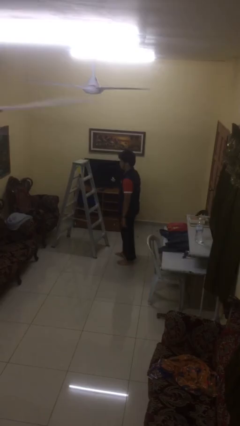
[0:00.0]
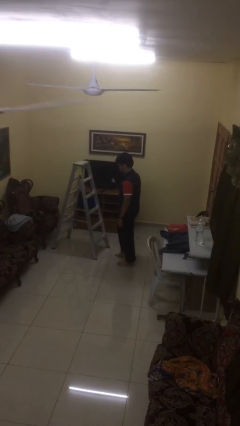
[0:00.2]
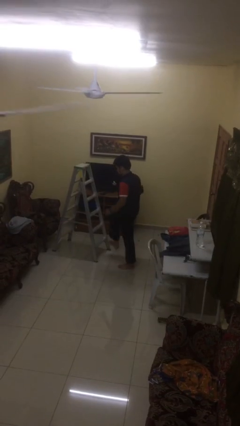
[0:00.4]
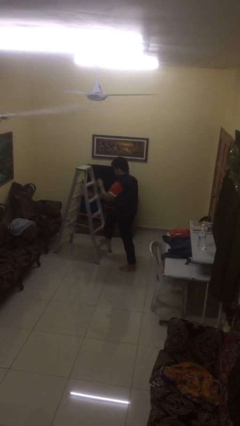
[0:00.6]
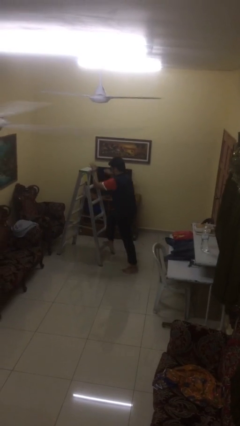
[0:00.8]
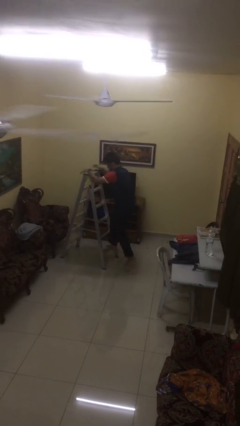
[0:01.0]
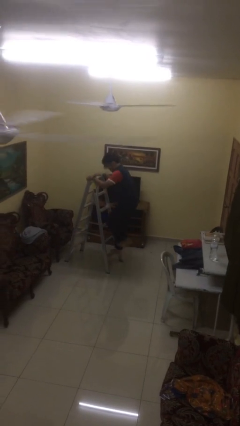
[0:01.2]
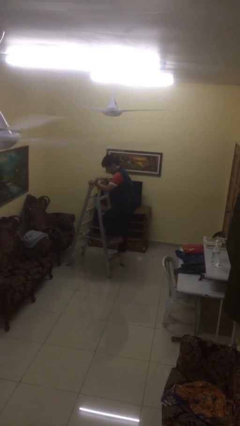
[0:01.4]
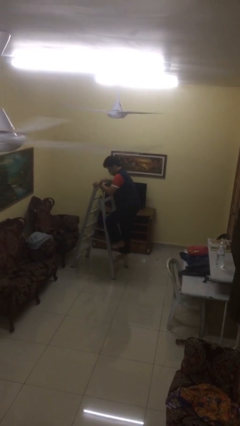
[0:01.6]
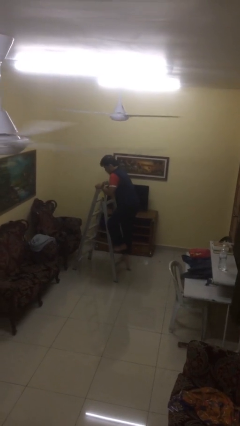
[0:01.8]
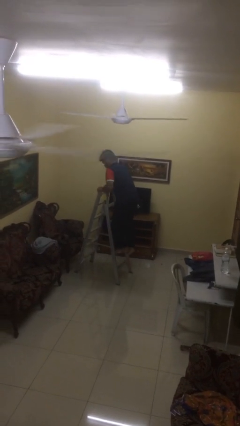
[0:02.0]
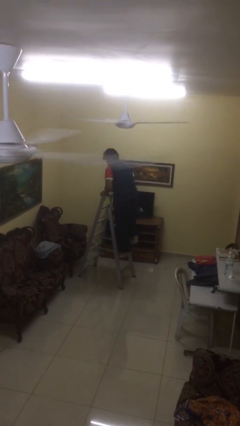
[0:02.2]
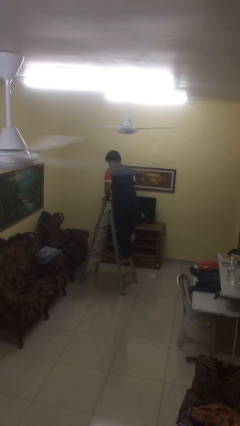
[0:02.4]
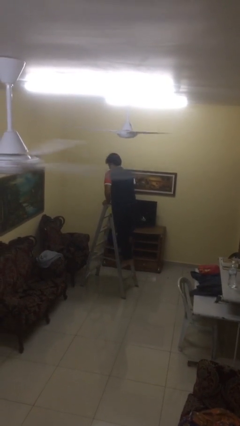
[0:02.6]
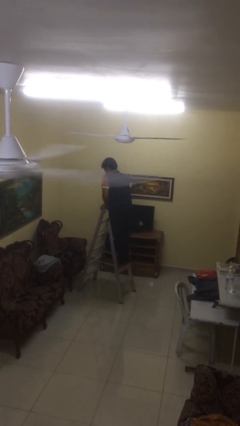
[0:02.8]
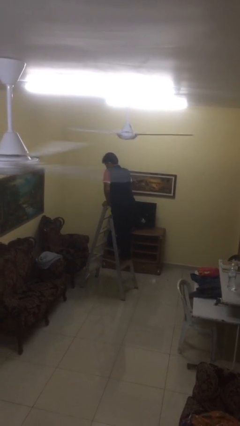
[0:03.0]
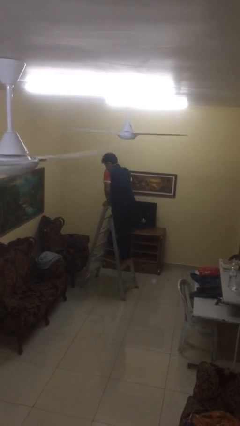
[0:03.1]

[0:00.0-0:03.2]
person climbs up ladder

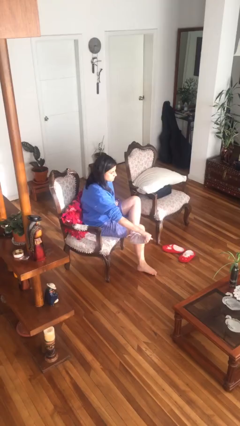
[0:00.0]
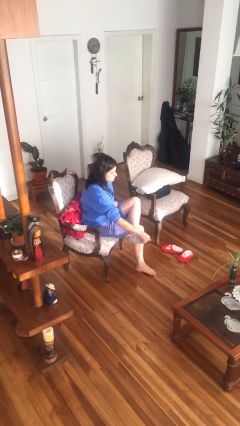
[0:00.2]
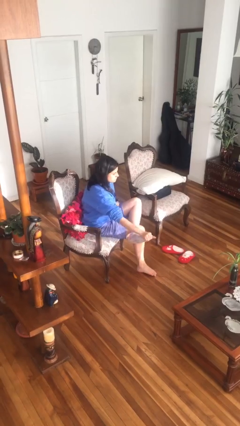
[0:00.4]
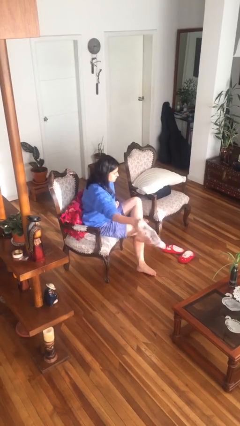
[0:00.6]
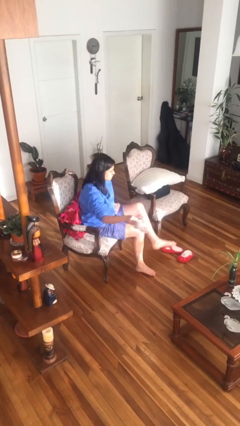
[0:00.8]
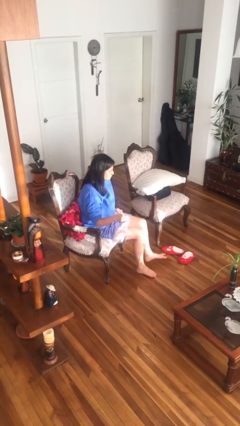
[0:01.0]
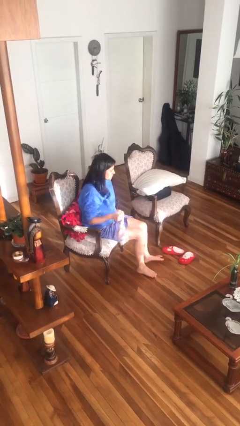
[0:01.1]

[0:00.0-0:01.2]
person takes off socks

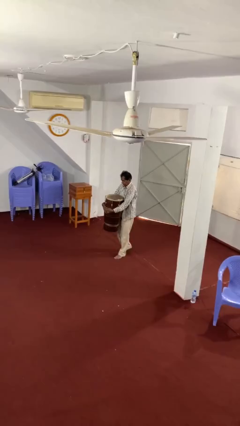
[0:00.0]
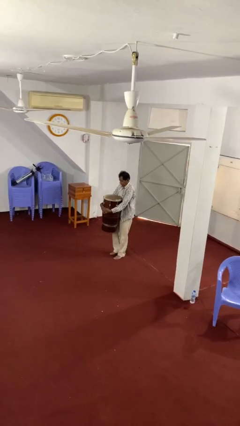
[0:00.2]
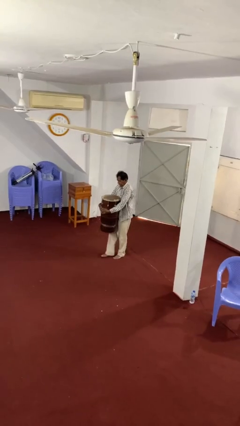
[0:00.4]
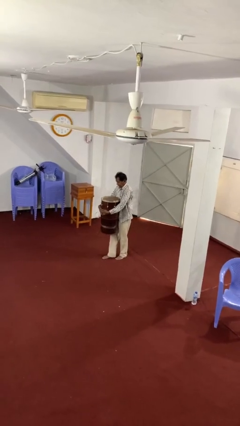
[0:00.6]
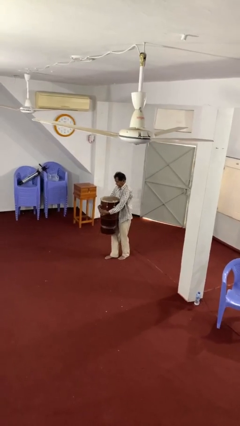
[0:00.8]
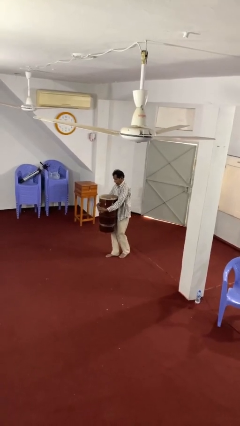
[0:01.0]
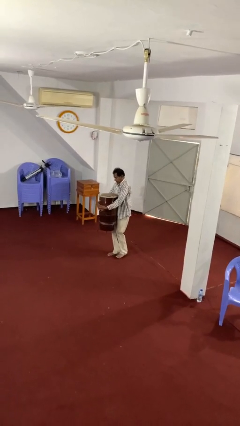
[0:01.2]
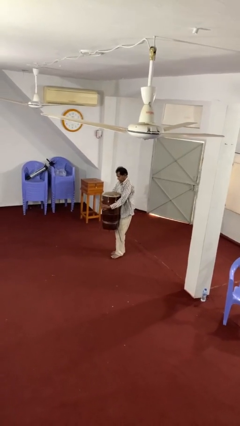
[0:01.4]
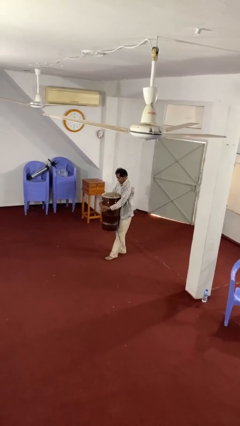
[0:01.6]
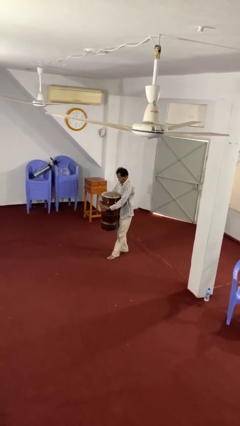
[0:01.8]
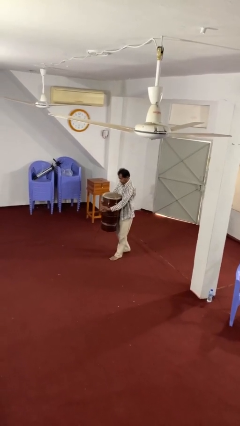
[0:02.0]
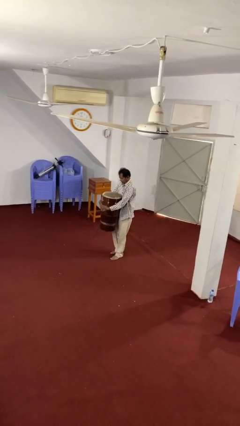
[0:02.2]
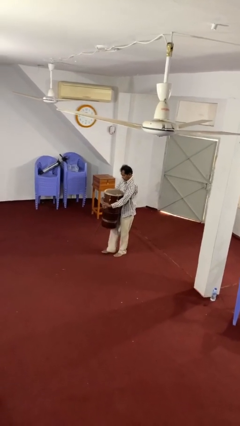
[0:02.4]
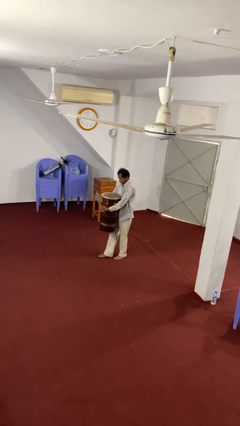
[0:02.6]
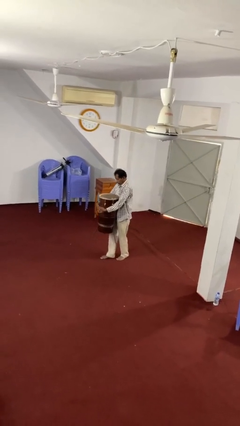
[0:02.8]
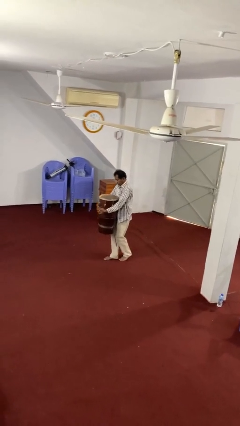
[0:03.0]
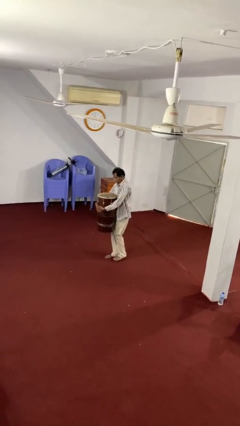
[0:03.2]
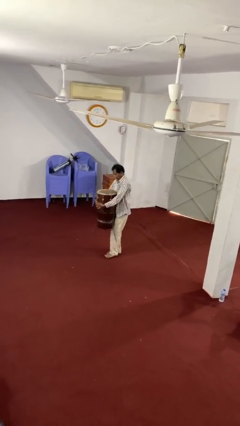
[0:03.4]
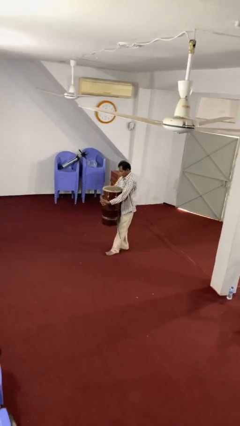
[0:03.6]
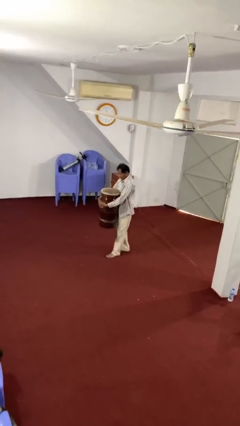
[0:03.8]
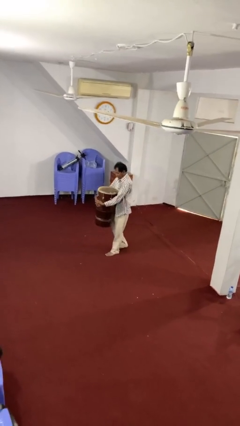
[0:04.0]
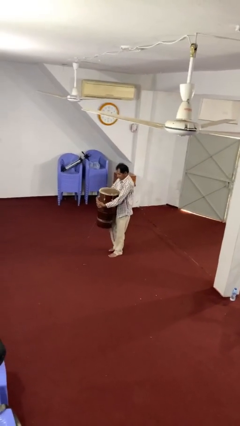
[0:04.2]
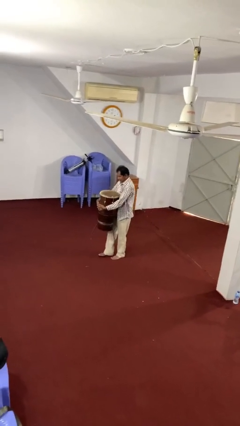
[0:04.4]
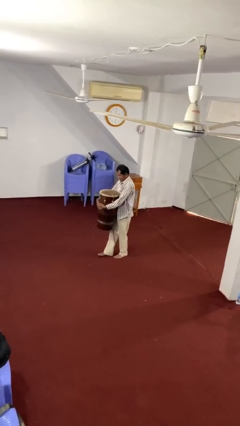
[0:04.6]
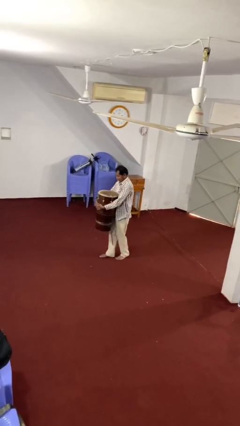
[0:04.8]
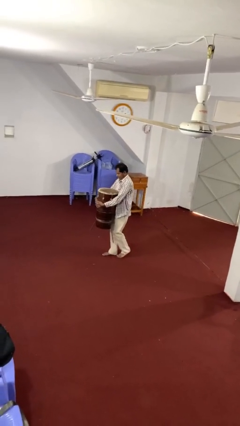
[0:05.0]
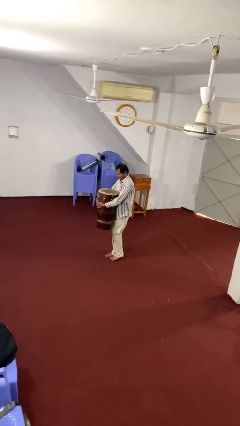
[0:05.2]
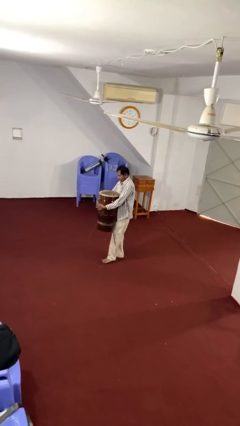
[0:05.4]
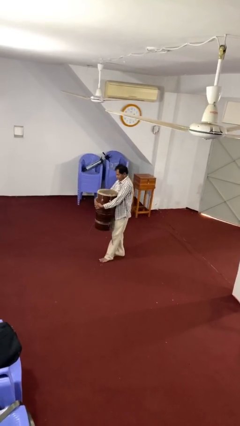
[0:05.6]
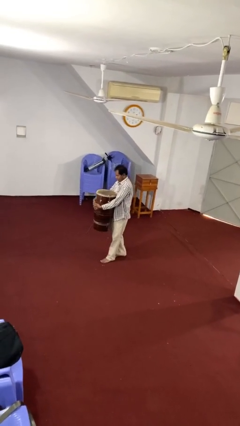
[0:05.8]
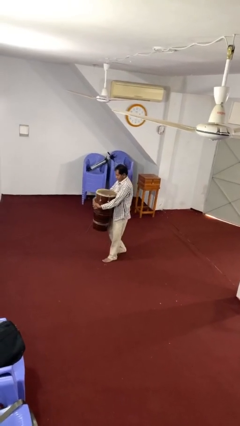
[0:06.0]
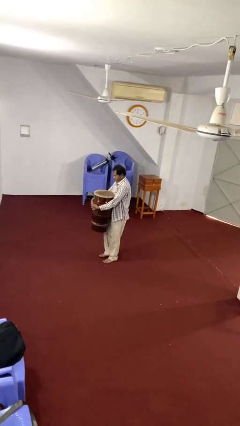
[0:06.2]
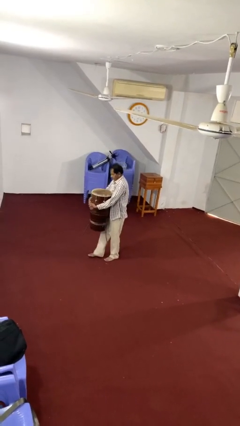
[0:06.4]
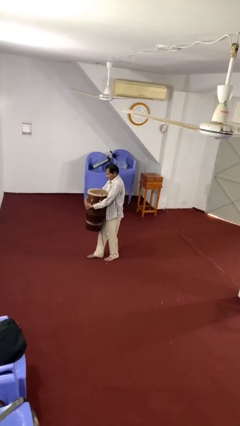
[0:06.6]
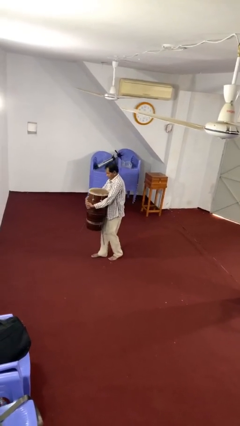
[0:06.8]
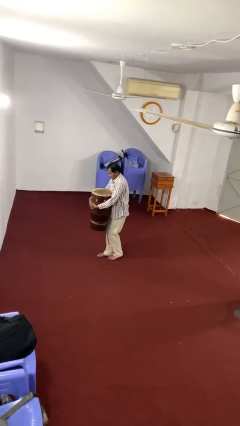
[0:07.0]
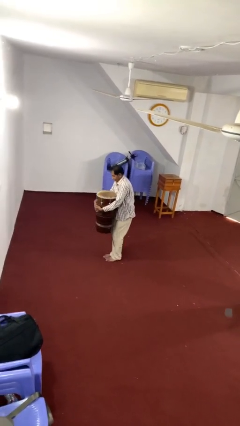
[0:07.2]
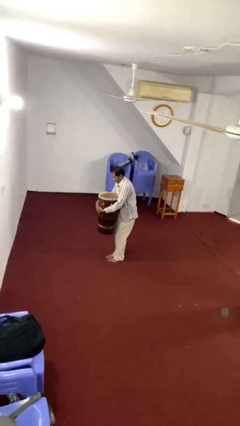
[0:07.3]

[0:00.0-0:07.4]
person carries heavy object

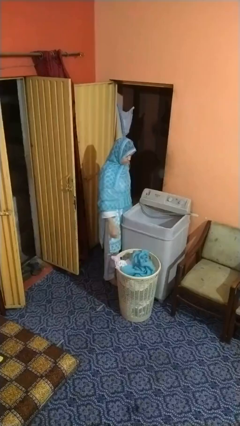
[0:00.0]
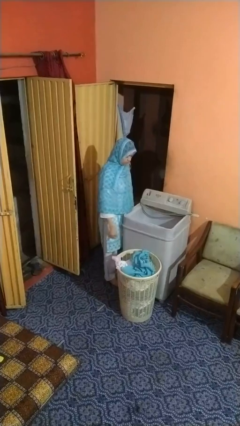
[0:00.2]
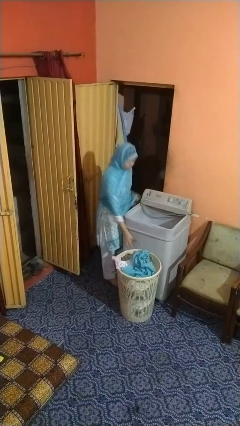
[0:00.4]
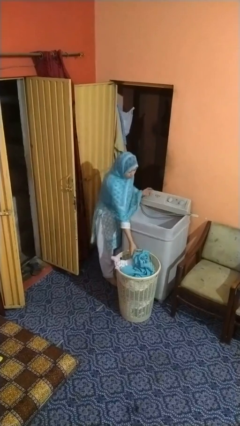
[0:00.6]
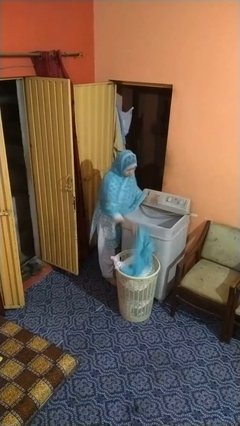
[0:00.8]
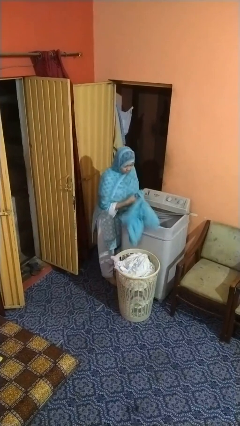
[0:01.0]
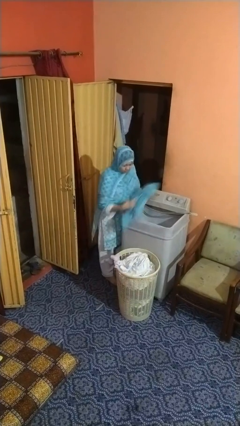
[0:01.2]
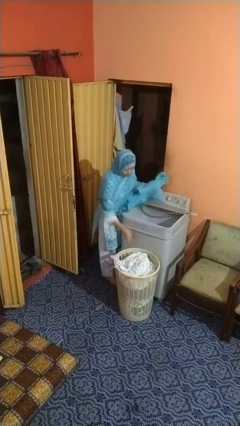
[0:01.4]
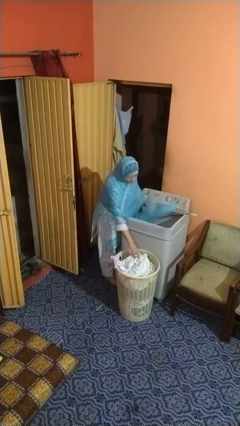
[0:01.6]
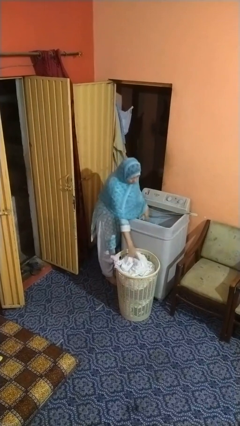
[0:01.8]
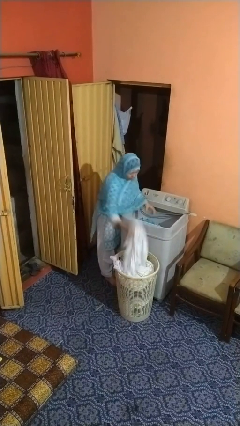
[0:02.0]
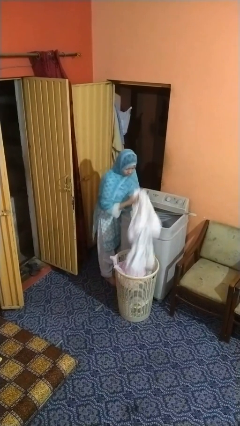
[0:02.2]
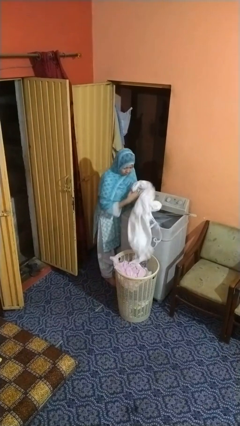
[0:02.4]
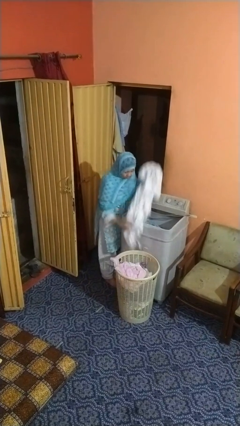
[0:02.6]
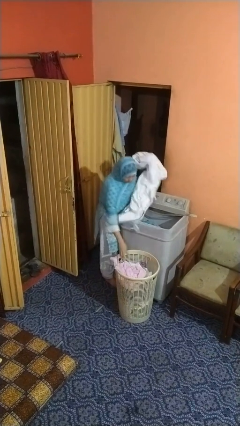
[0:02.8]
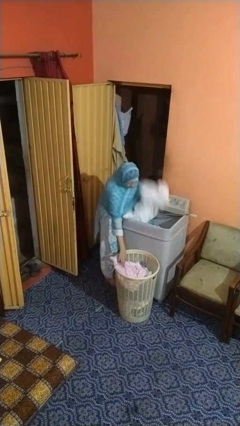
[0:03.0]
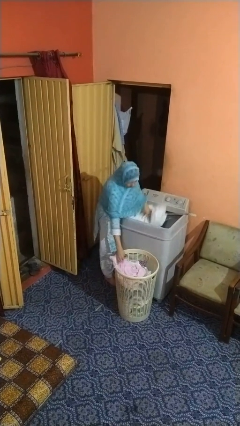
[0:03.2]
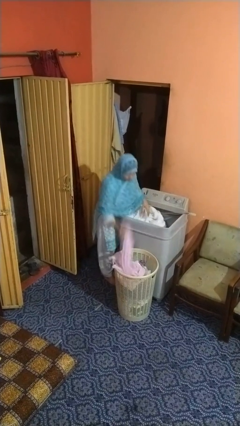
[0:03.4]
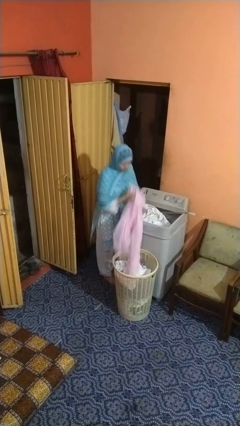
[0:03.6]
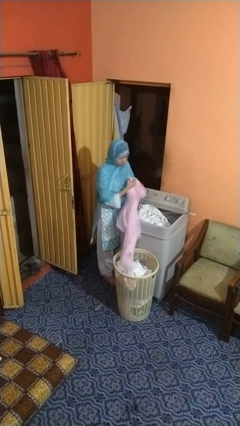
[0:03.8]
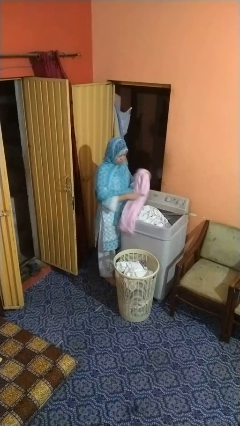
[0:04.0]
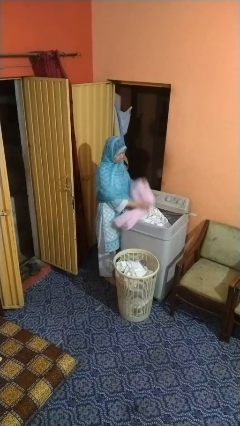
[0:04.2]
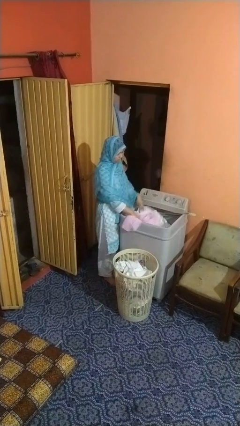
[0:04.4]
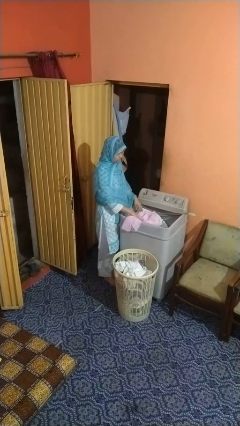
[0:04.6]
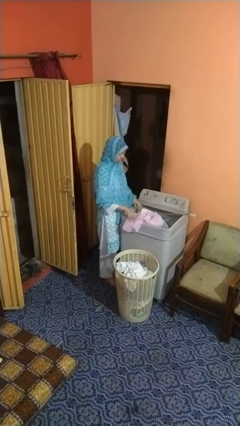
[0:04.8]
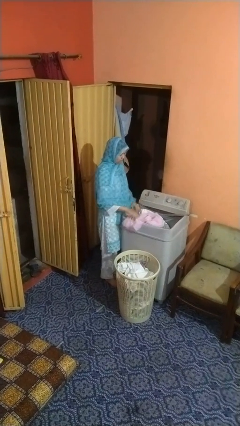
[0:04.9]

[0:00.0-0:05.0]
person loads clotheswasher

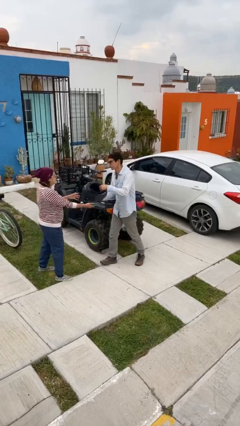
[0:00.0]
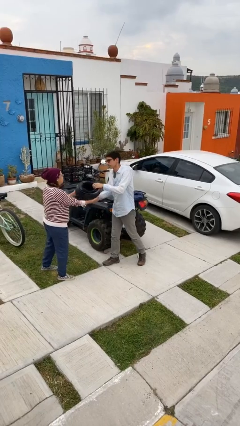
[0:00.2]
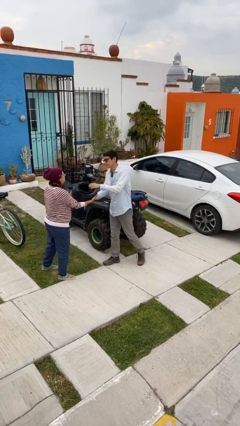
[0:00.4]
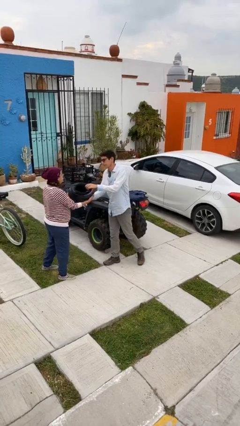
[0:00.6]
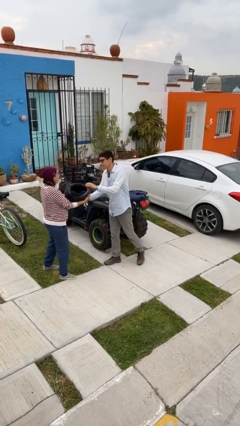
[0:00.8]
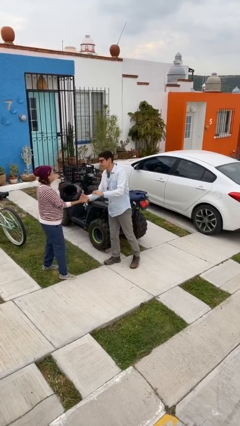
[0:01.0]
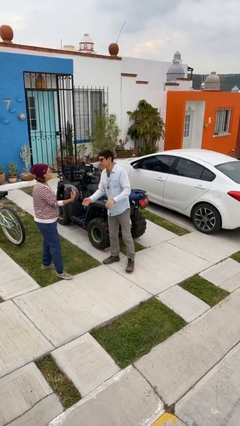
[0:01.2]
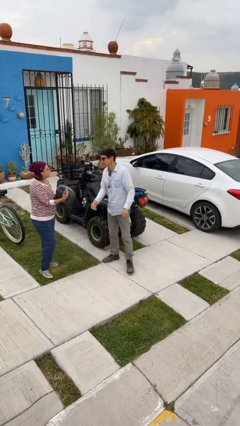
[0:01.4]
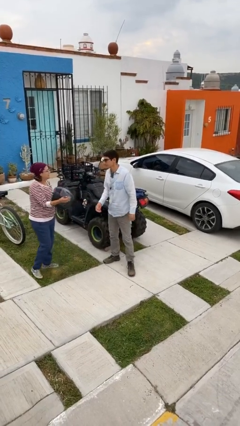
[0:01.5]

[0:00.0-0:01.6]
person transfers object to person
